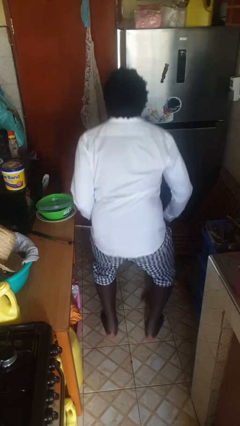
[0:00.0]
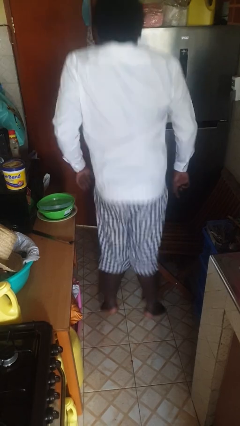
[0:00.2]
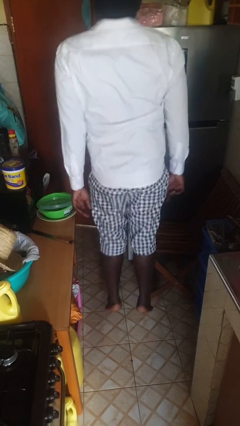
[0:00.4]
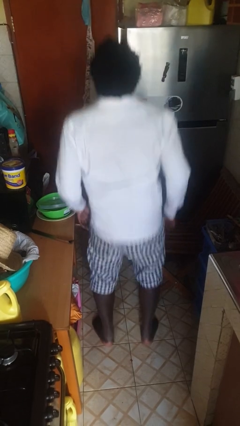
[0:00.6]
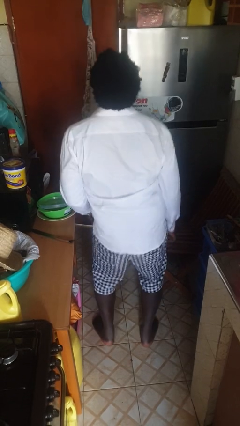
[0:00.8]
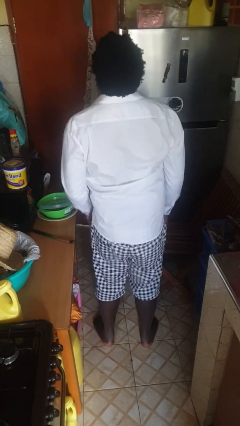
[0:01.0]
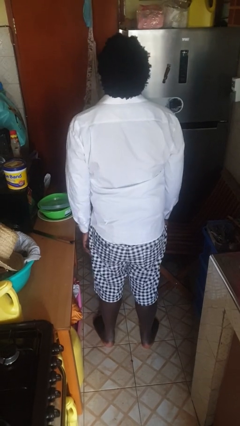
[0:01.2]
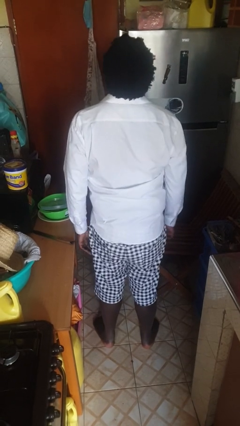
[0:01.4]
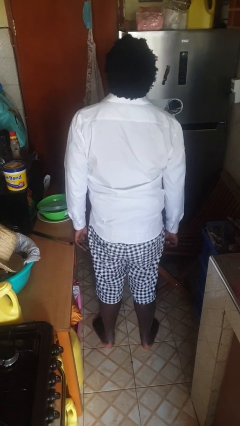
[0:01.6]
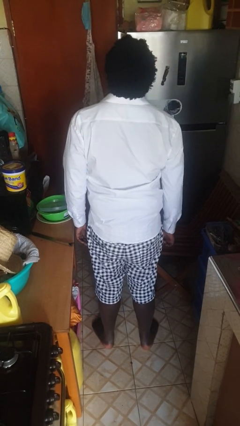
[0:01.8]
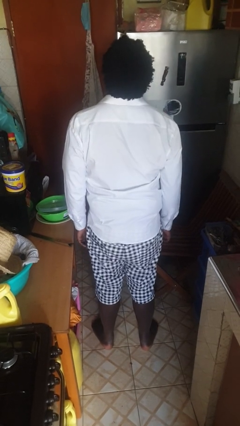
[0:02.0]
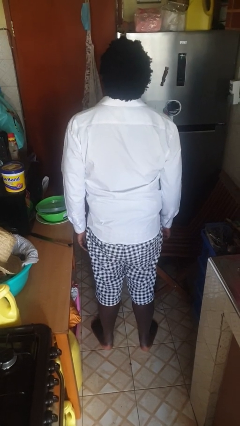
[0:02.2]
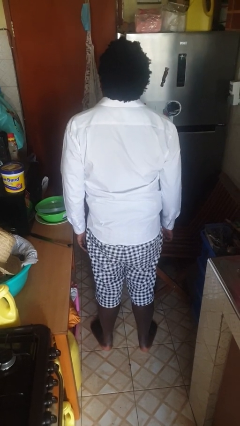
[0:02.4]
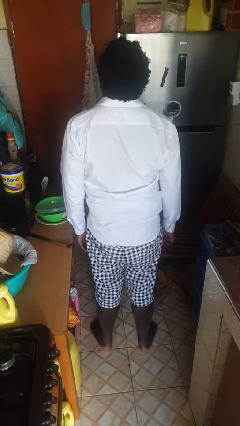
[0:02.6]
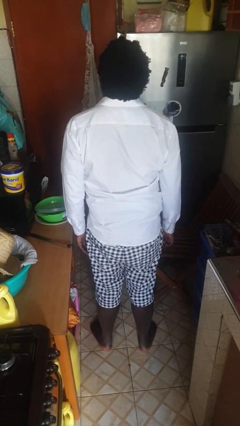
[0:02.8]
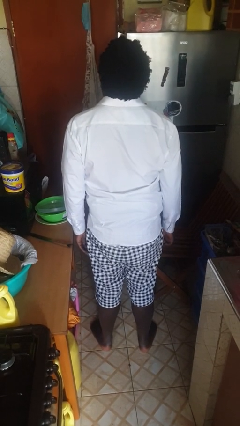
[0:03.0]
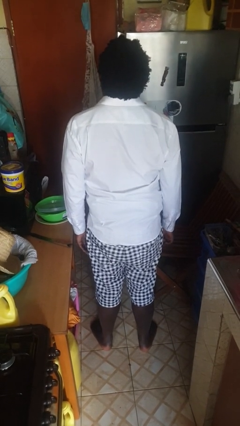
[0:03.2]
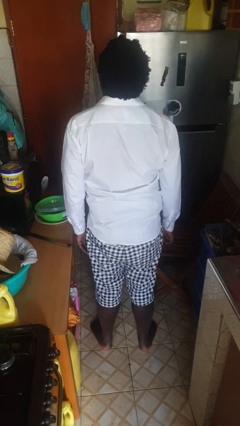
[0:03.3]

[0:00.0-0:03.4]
person jumps

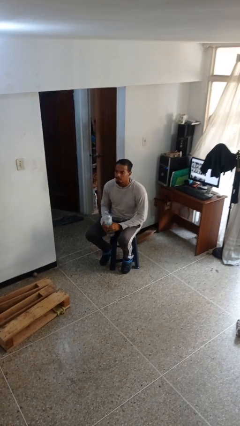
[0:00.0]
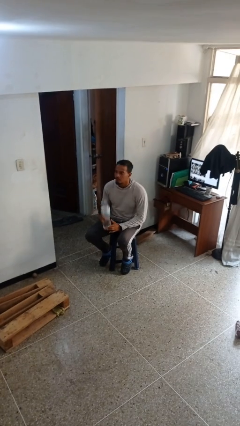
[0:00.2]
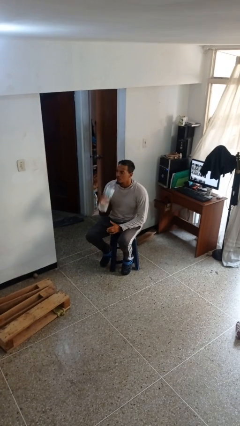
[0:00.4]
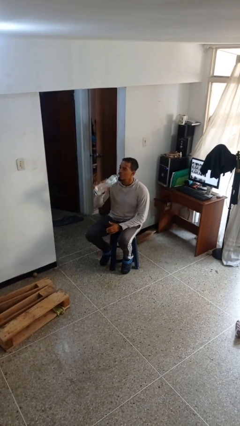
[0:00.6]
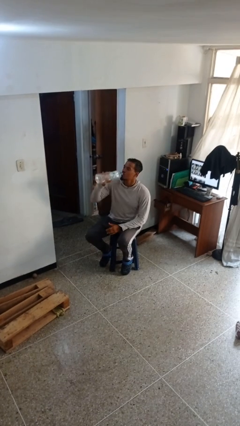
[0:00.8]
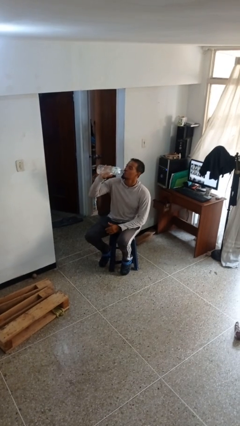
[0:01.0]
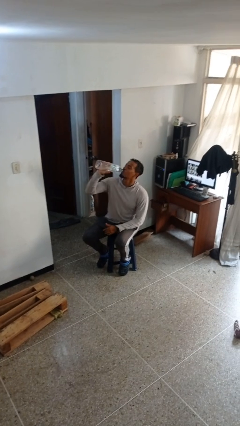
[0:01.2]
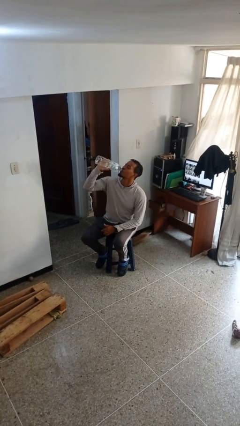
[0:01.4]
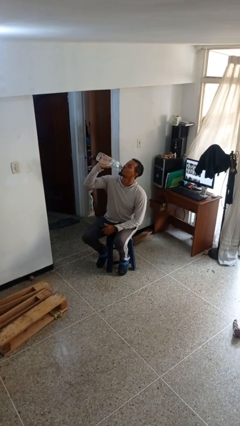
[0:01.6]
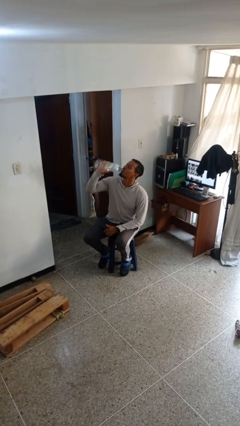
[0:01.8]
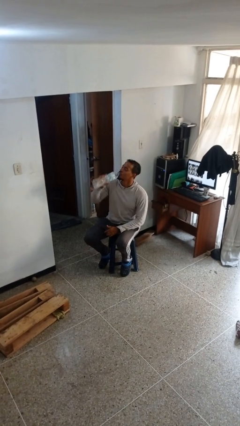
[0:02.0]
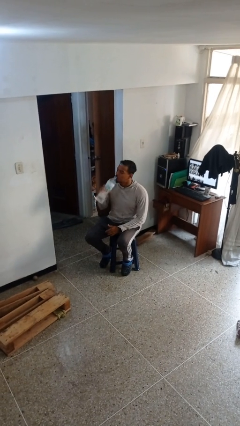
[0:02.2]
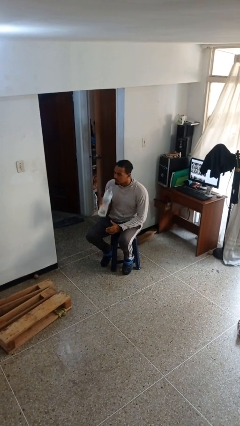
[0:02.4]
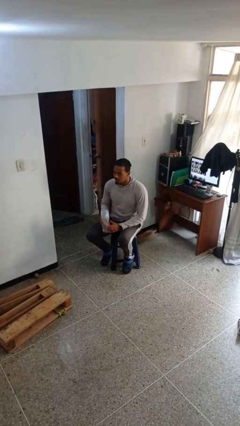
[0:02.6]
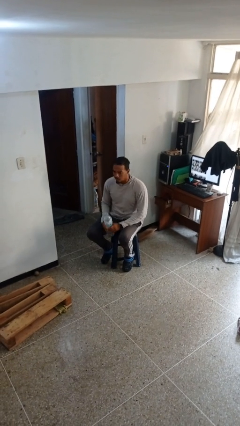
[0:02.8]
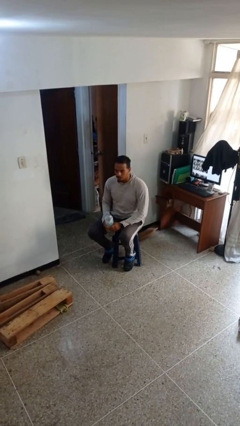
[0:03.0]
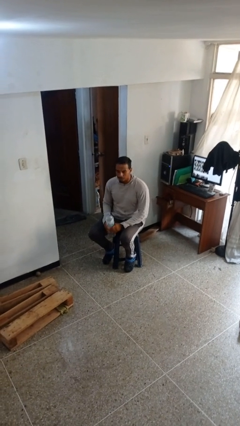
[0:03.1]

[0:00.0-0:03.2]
person drinks from bottle

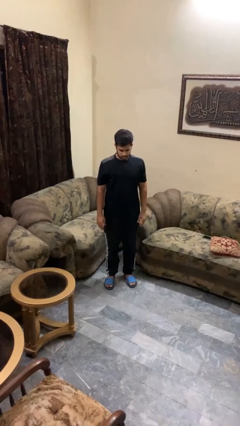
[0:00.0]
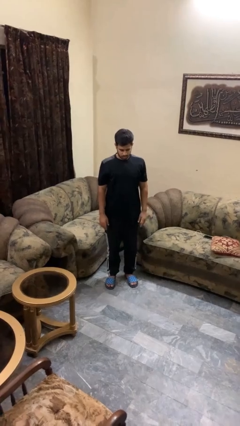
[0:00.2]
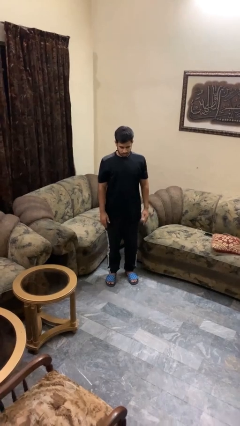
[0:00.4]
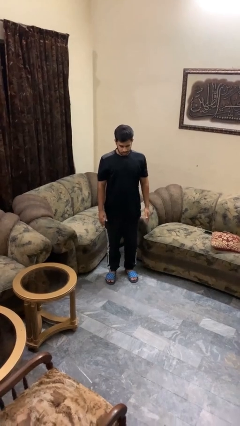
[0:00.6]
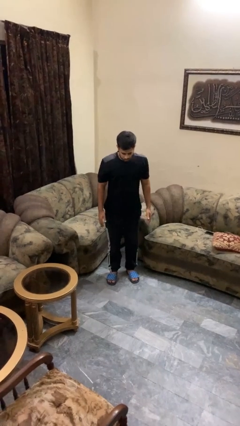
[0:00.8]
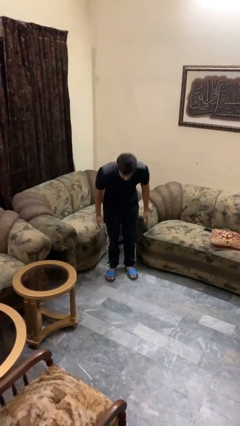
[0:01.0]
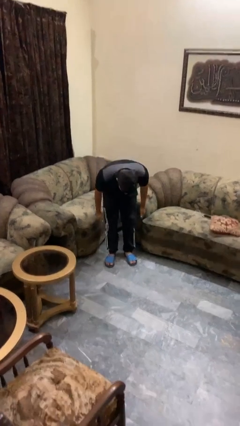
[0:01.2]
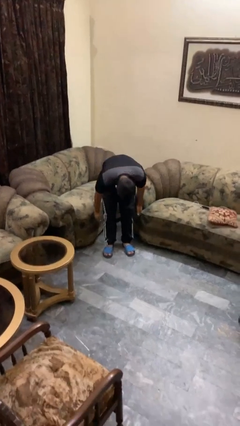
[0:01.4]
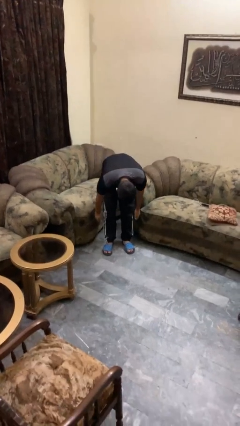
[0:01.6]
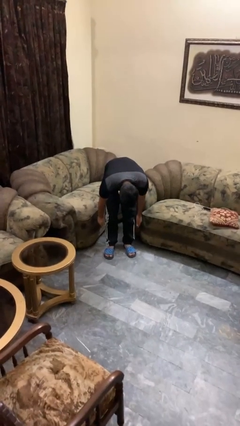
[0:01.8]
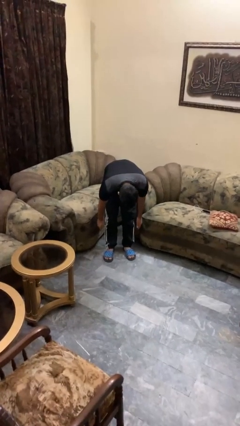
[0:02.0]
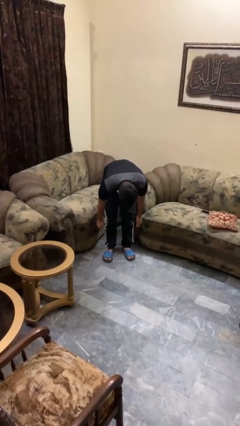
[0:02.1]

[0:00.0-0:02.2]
person bows

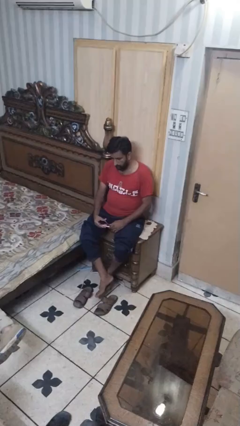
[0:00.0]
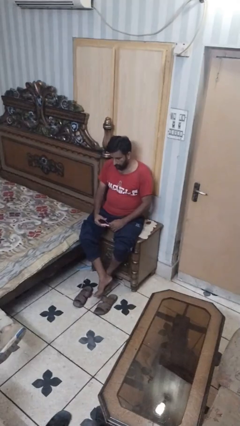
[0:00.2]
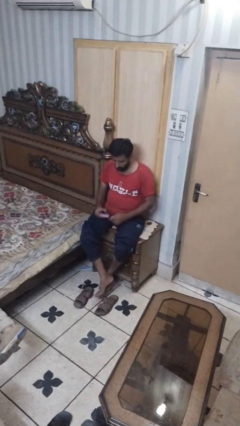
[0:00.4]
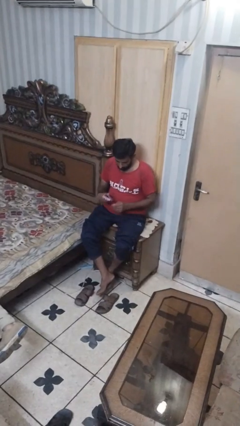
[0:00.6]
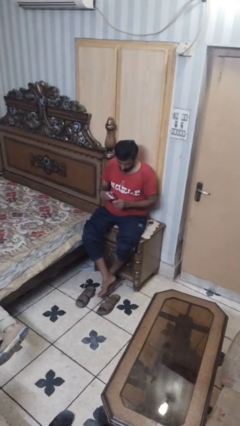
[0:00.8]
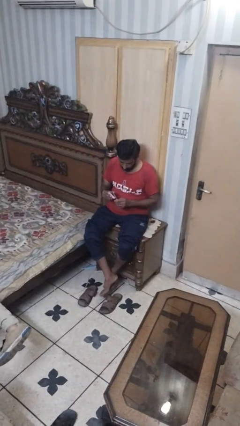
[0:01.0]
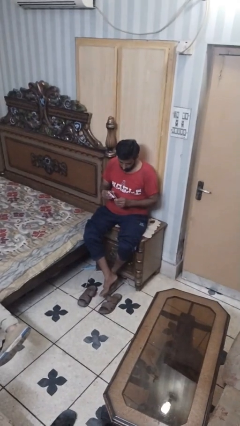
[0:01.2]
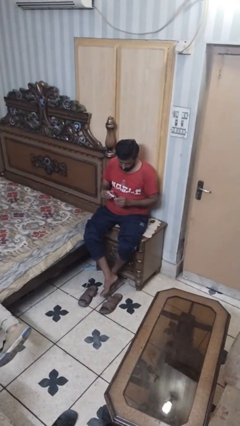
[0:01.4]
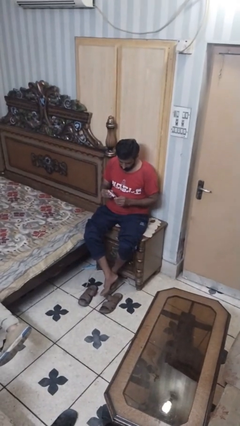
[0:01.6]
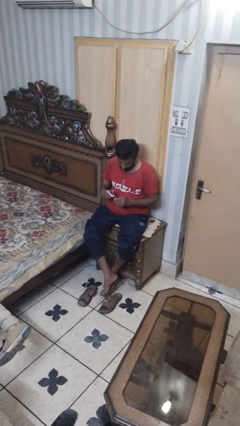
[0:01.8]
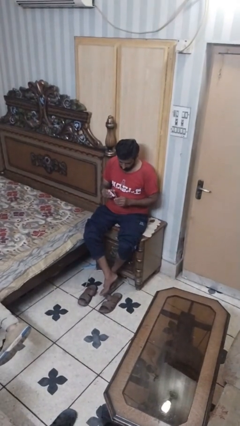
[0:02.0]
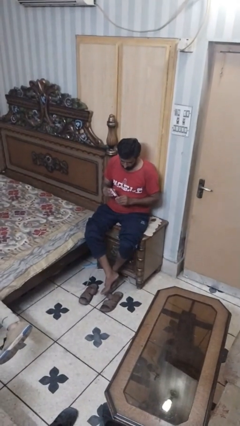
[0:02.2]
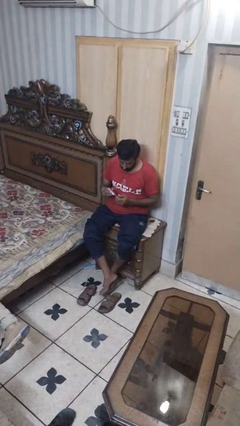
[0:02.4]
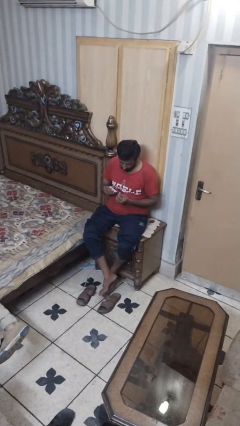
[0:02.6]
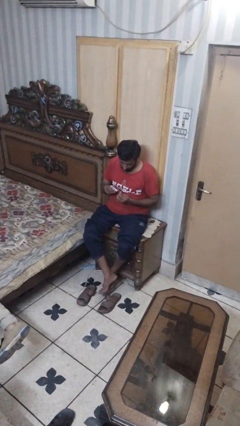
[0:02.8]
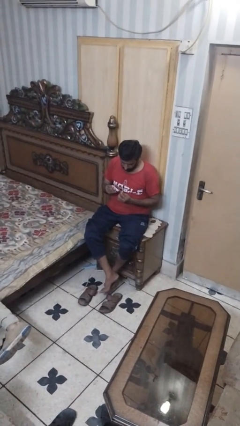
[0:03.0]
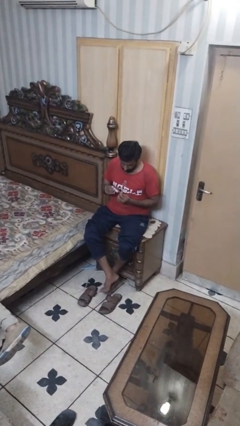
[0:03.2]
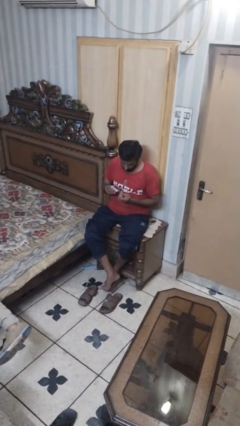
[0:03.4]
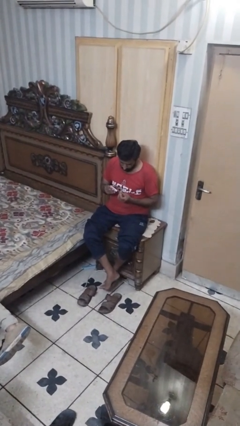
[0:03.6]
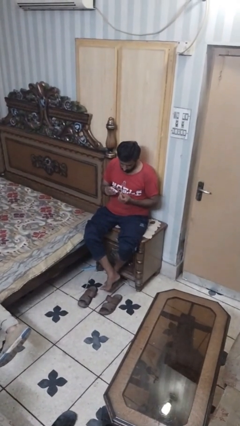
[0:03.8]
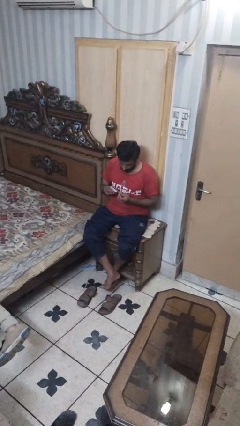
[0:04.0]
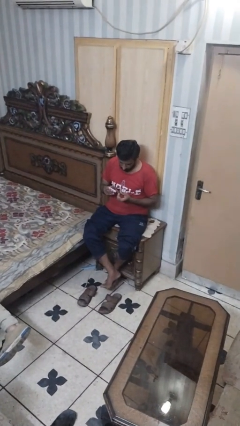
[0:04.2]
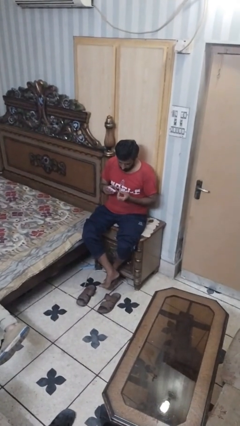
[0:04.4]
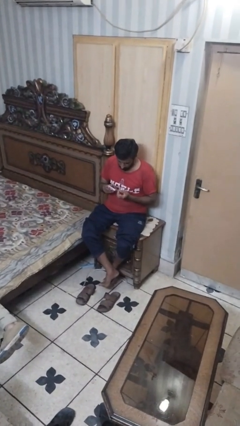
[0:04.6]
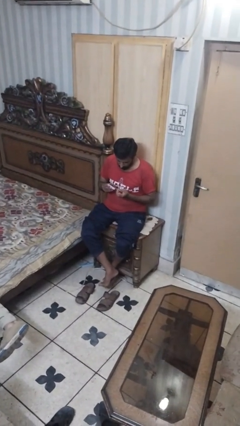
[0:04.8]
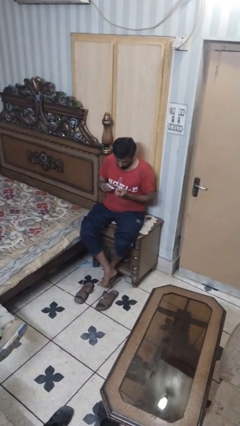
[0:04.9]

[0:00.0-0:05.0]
person clips fingernails

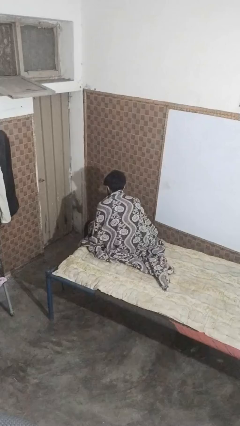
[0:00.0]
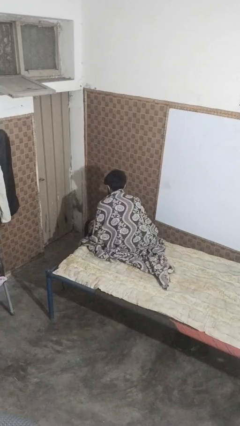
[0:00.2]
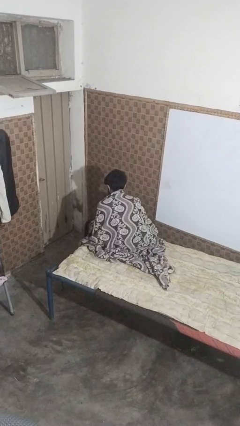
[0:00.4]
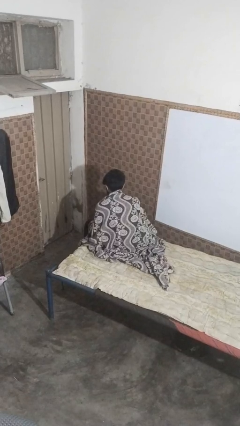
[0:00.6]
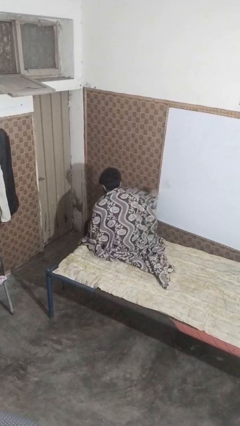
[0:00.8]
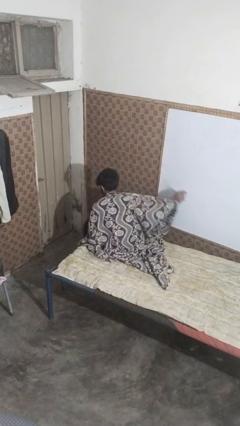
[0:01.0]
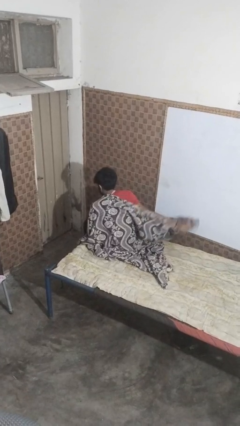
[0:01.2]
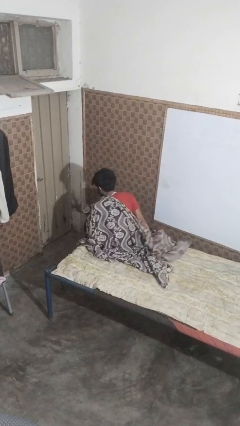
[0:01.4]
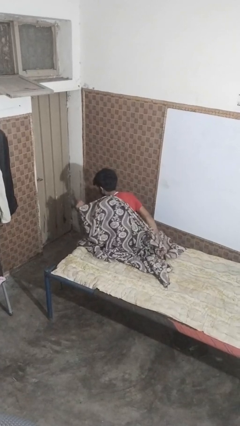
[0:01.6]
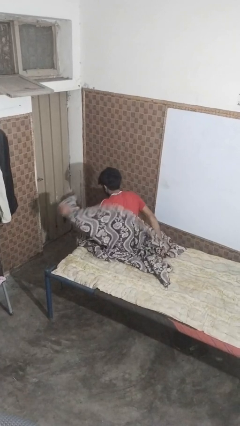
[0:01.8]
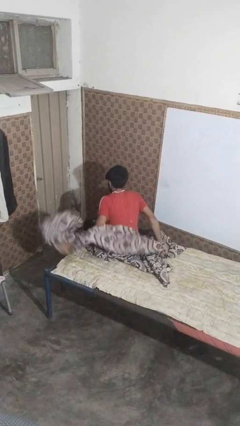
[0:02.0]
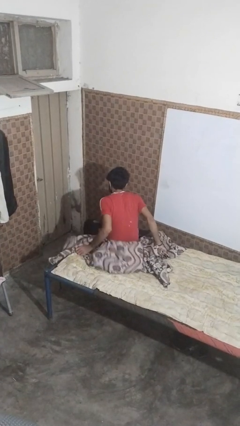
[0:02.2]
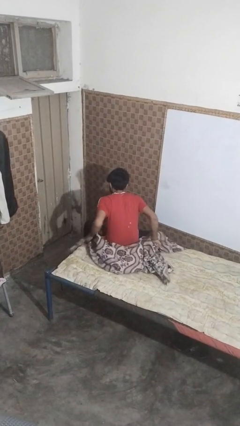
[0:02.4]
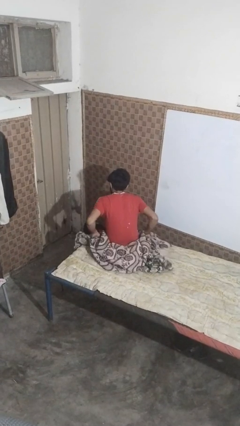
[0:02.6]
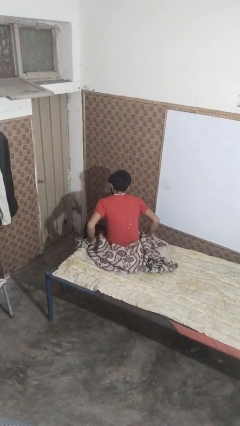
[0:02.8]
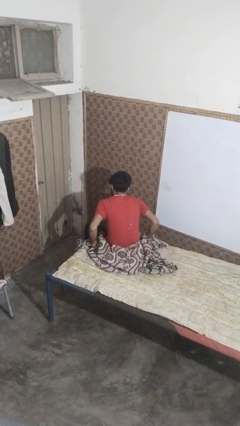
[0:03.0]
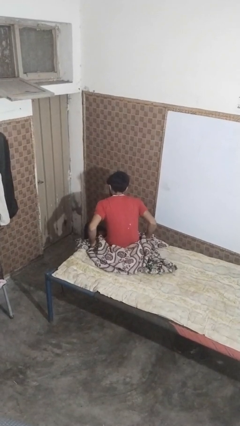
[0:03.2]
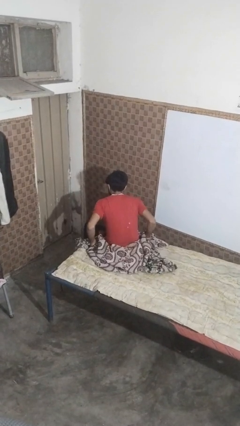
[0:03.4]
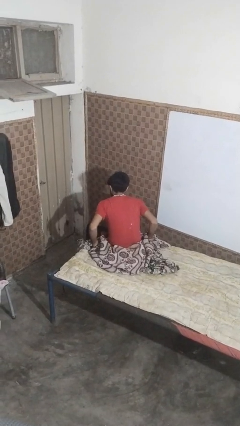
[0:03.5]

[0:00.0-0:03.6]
person uncovers with bedsheets

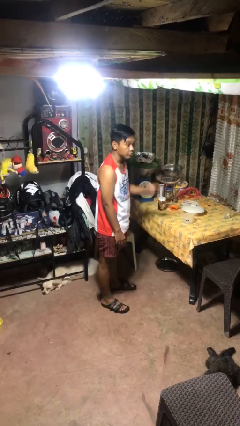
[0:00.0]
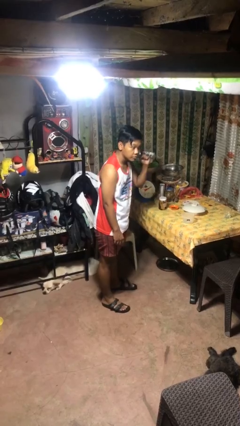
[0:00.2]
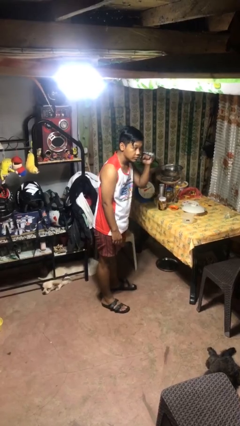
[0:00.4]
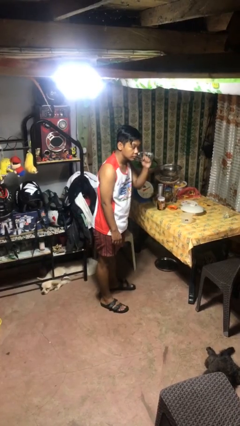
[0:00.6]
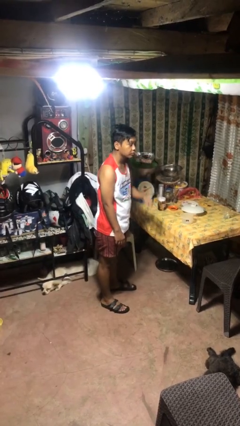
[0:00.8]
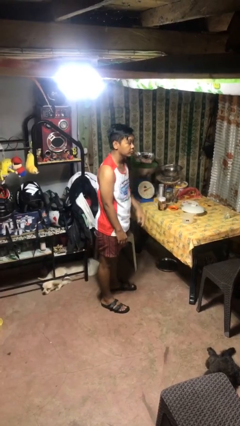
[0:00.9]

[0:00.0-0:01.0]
person gestures listen closely
